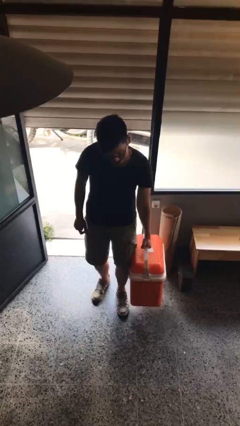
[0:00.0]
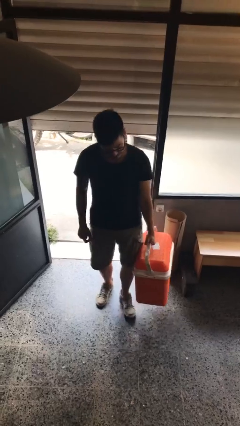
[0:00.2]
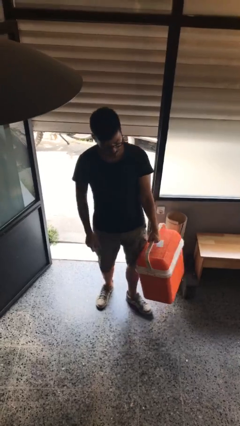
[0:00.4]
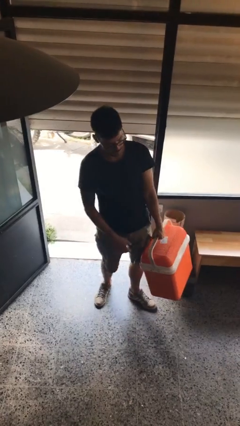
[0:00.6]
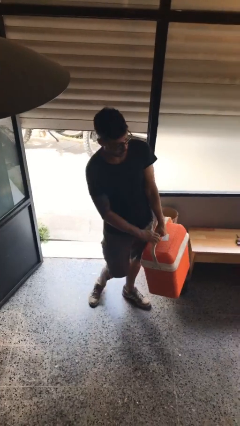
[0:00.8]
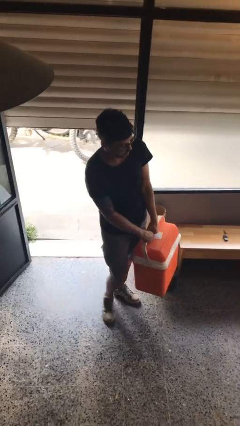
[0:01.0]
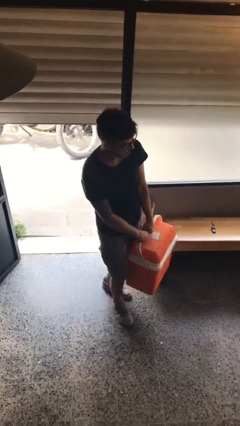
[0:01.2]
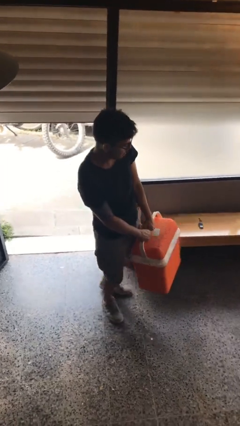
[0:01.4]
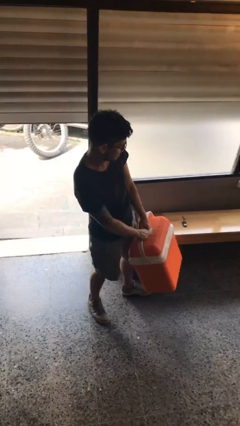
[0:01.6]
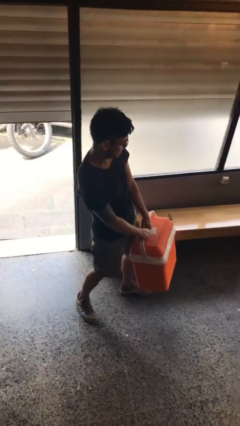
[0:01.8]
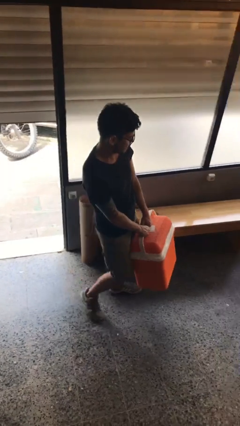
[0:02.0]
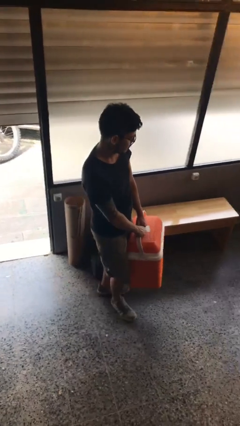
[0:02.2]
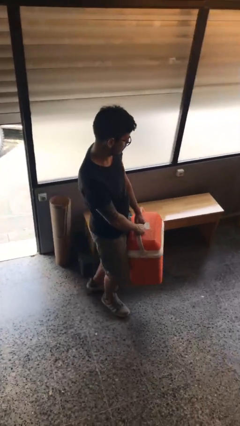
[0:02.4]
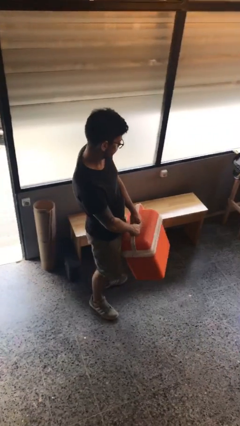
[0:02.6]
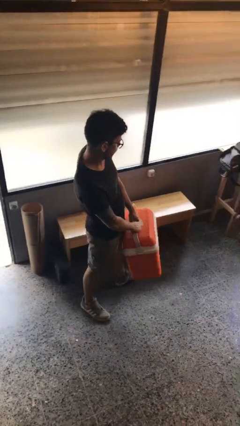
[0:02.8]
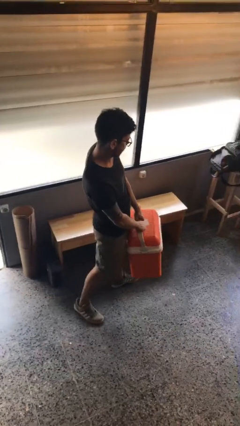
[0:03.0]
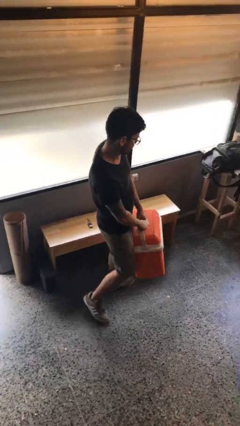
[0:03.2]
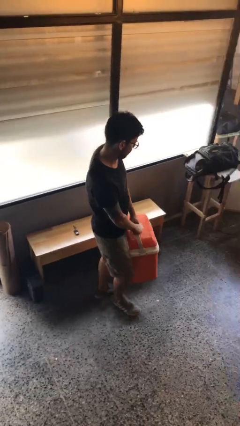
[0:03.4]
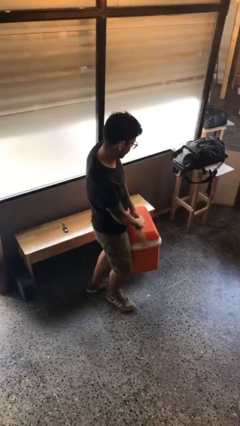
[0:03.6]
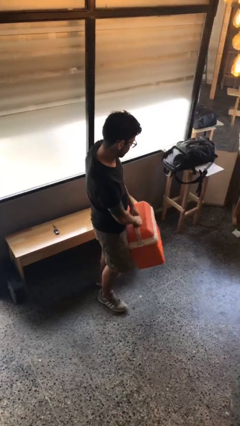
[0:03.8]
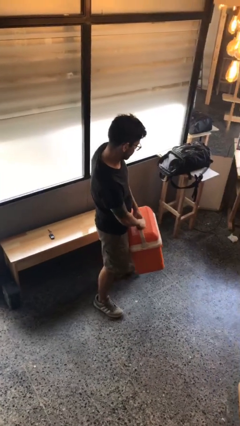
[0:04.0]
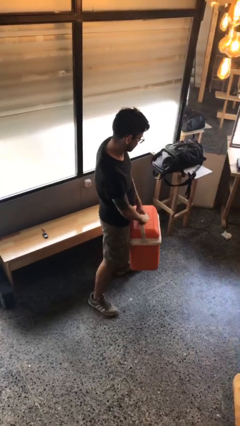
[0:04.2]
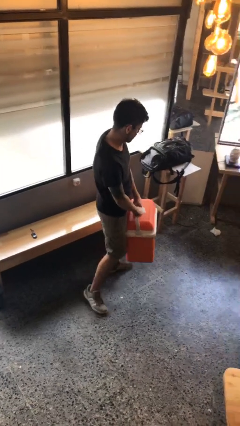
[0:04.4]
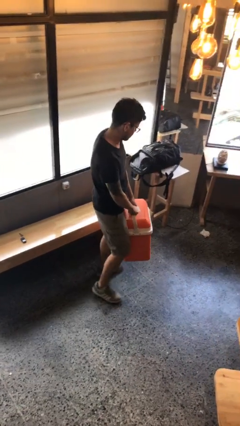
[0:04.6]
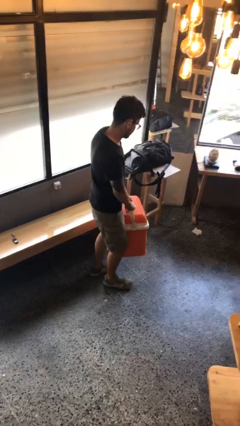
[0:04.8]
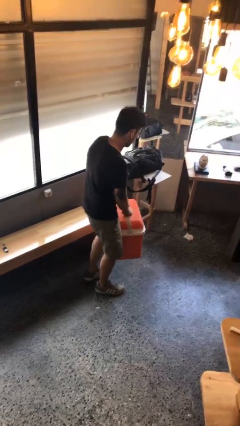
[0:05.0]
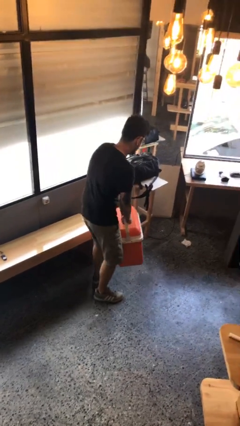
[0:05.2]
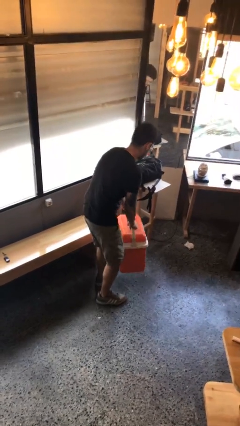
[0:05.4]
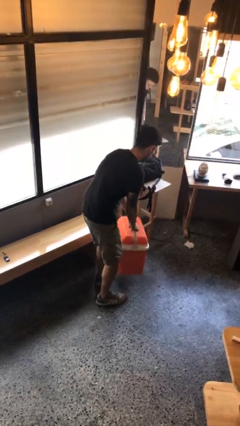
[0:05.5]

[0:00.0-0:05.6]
person carries heavy object

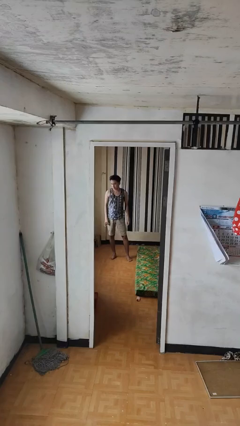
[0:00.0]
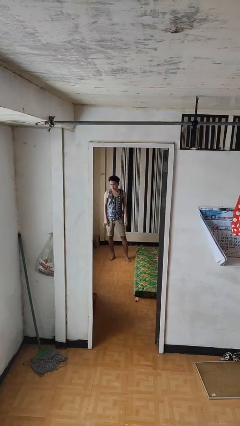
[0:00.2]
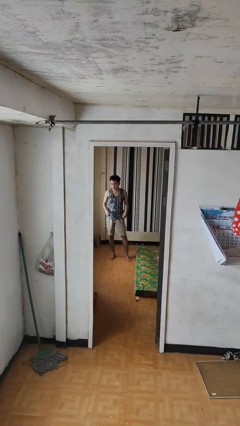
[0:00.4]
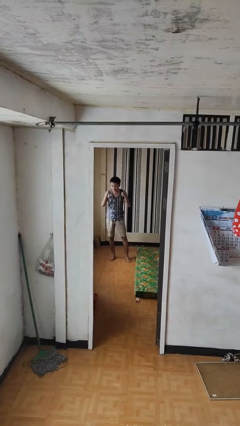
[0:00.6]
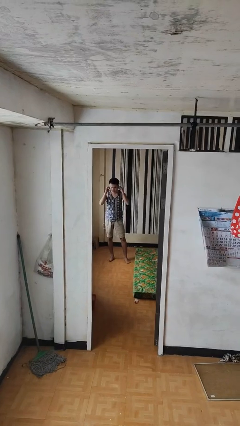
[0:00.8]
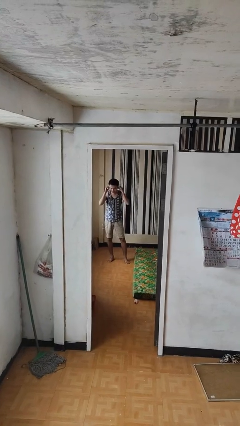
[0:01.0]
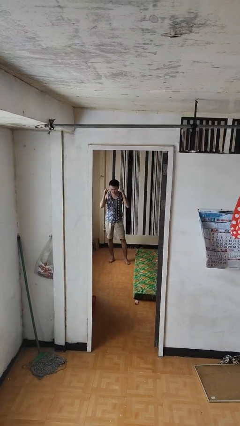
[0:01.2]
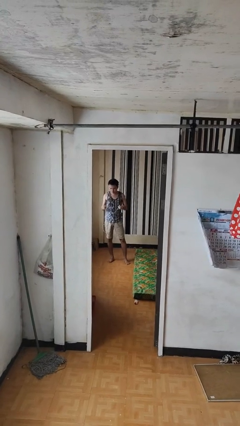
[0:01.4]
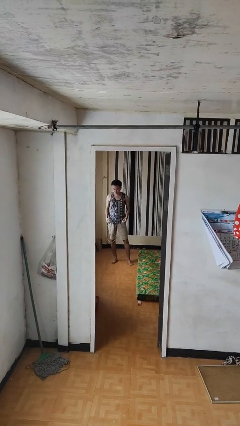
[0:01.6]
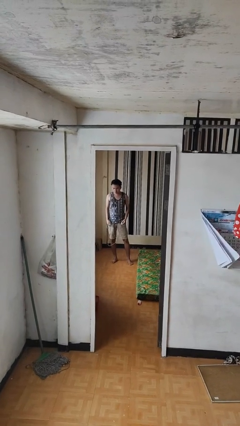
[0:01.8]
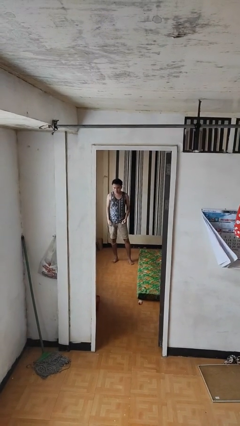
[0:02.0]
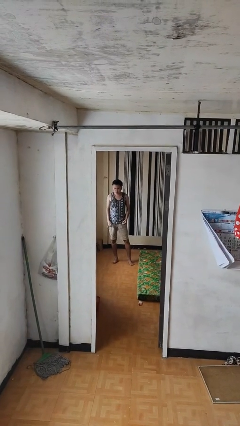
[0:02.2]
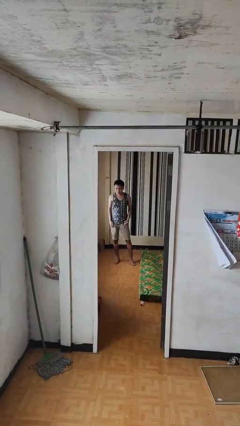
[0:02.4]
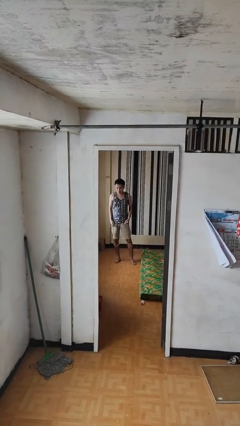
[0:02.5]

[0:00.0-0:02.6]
person takes off headphones

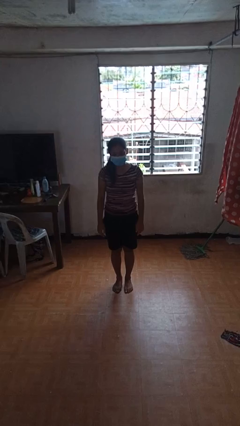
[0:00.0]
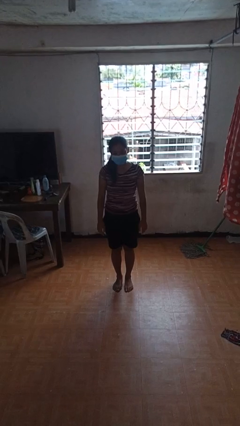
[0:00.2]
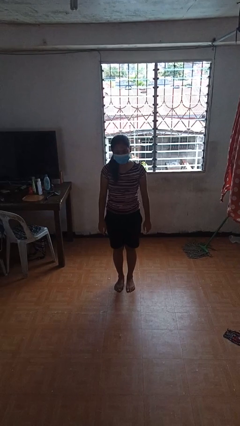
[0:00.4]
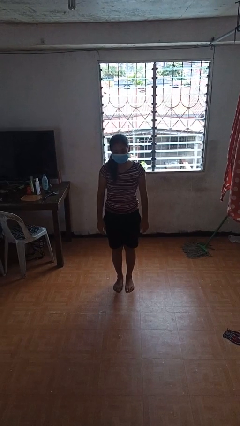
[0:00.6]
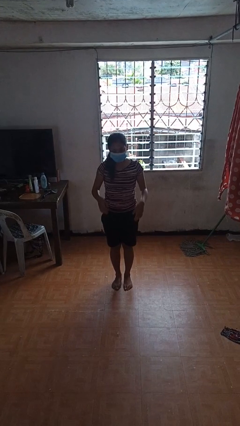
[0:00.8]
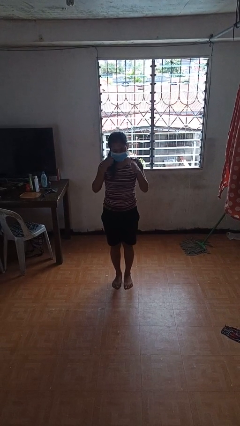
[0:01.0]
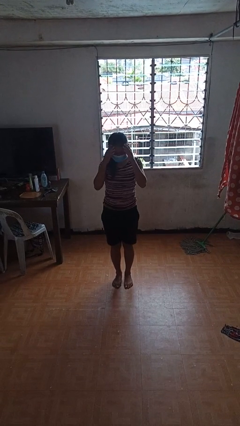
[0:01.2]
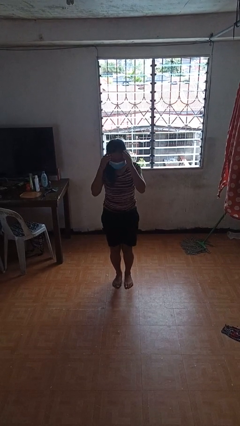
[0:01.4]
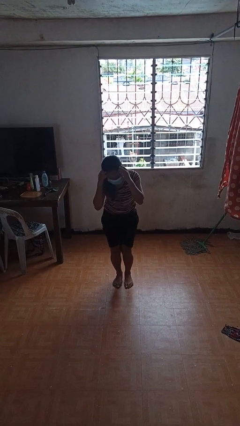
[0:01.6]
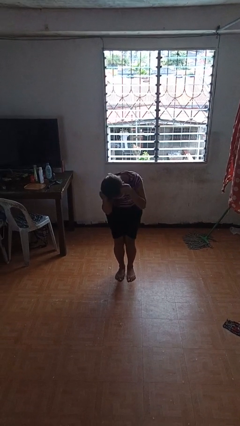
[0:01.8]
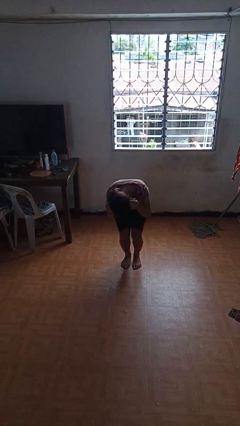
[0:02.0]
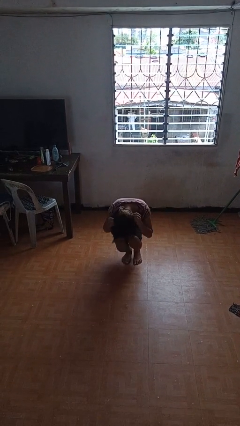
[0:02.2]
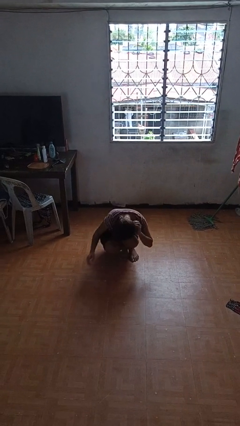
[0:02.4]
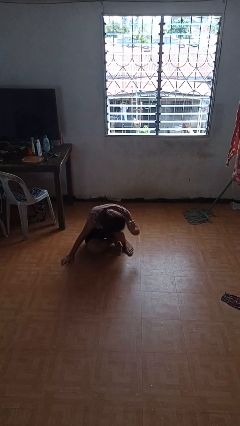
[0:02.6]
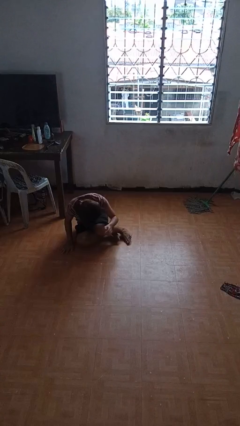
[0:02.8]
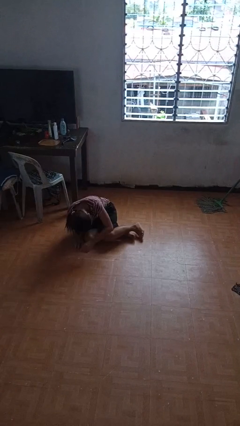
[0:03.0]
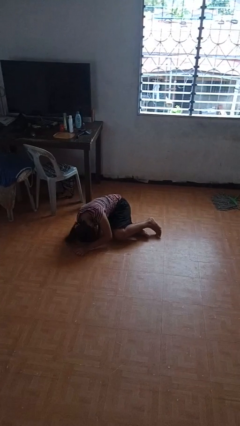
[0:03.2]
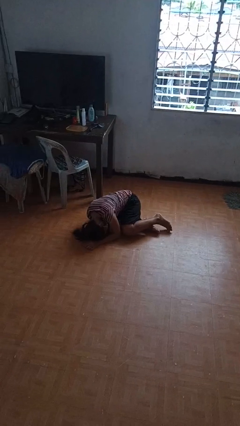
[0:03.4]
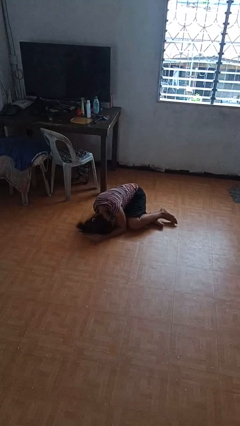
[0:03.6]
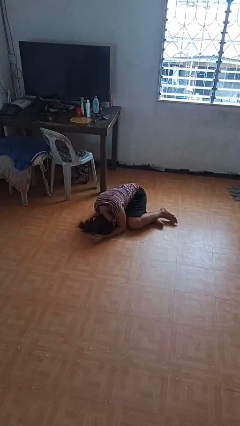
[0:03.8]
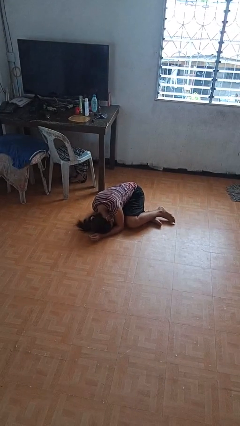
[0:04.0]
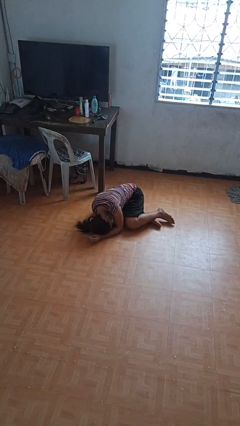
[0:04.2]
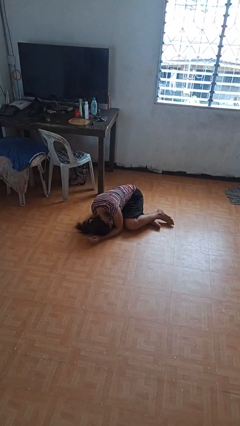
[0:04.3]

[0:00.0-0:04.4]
person falls while standing

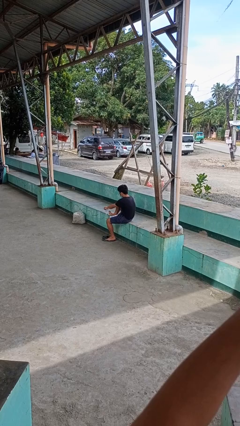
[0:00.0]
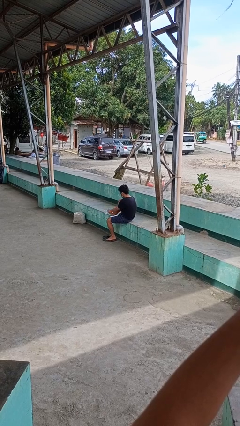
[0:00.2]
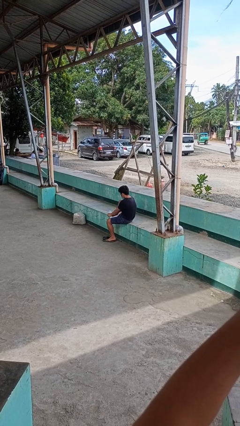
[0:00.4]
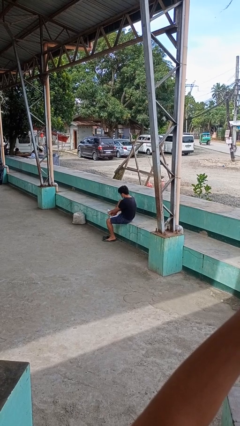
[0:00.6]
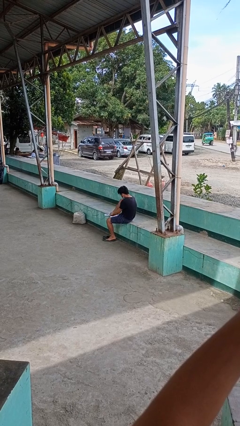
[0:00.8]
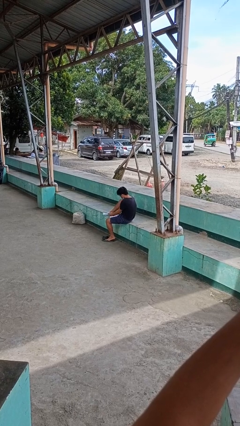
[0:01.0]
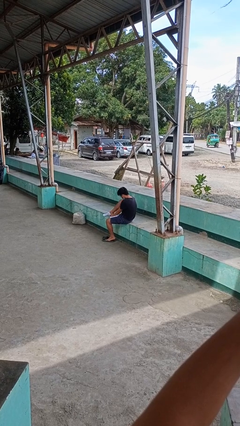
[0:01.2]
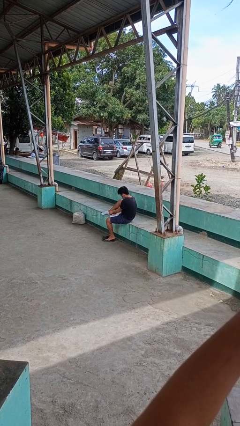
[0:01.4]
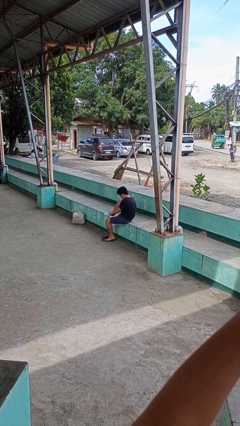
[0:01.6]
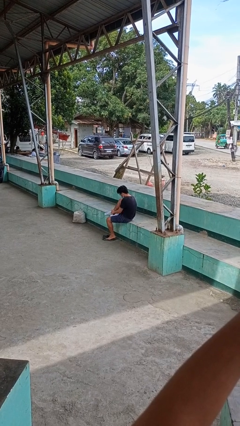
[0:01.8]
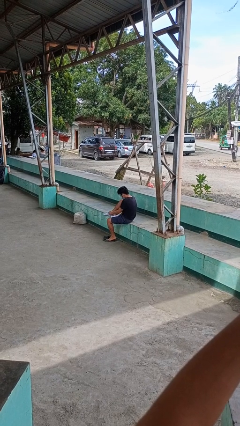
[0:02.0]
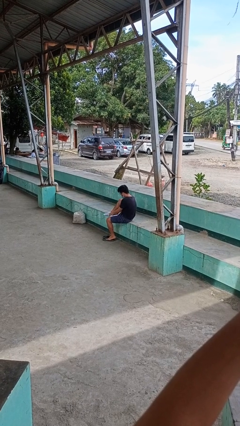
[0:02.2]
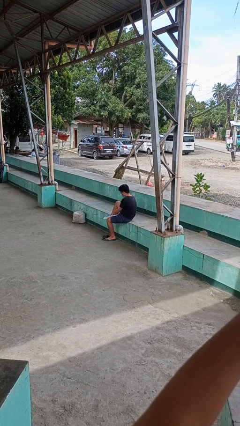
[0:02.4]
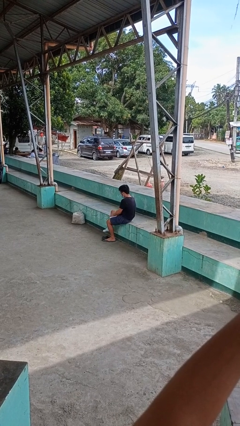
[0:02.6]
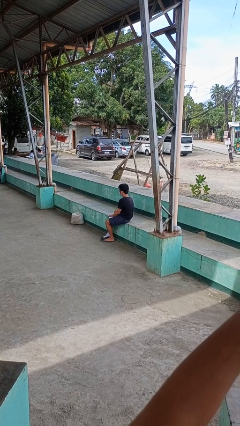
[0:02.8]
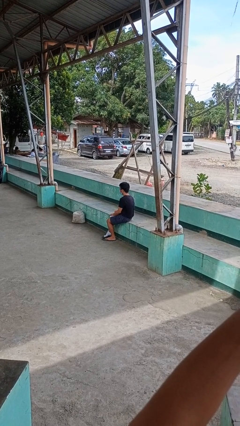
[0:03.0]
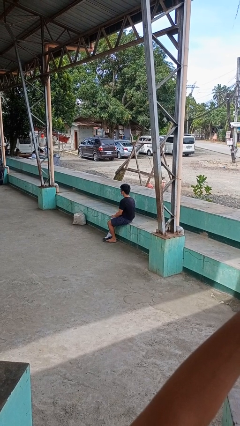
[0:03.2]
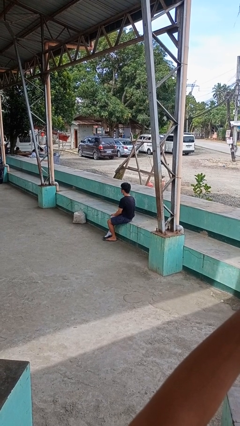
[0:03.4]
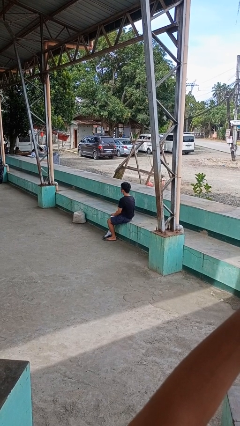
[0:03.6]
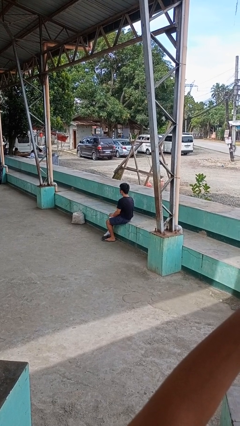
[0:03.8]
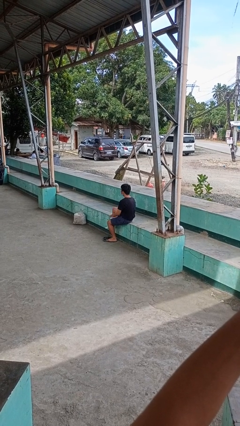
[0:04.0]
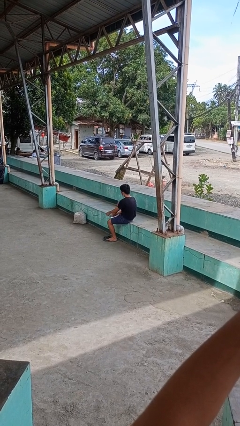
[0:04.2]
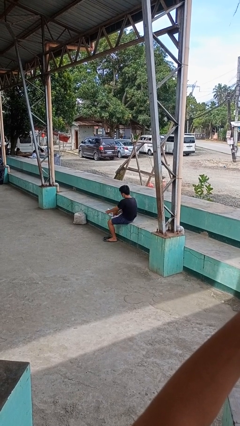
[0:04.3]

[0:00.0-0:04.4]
person puts on socks

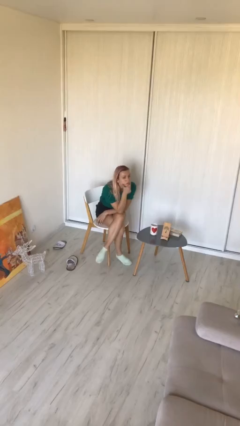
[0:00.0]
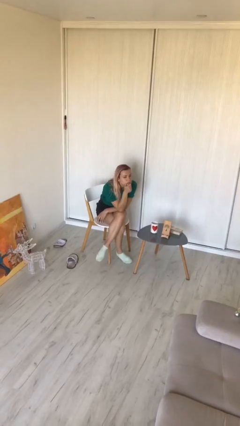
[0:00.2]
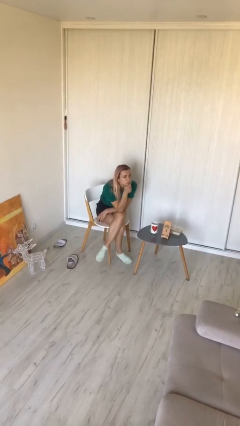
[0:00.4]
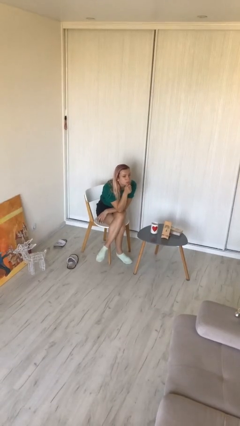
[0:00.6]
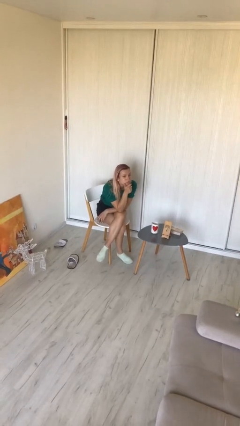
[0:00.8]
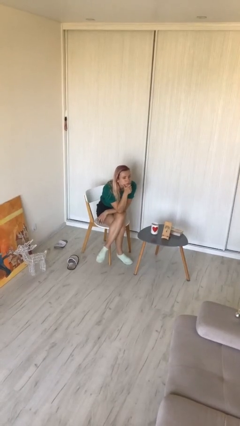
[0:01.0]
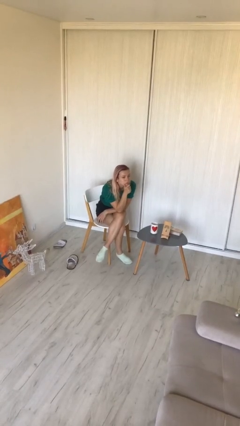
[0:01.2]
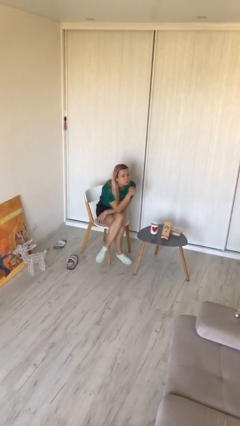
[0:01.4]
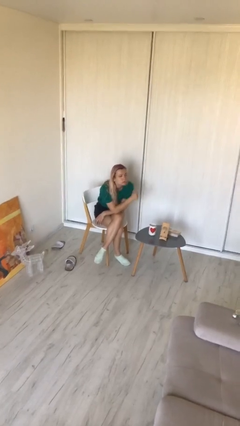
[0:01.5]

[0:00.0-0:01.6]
person strokes chin
